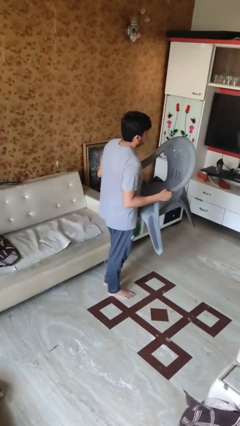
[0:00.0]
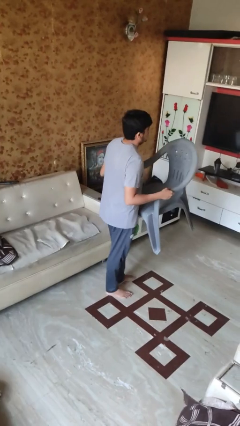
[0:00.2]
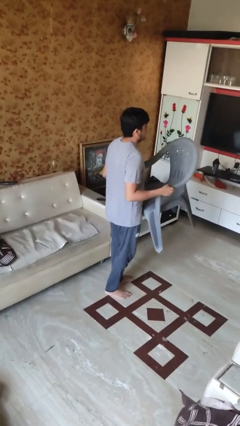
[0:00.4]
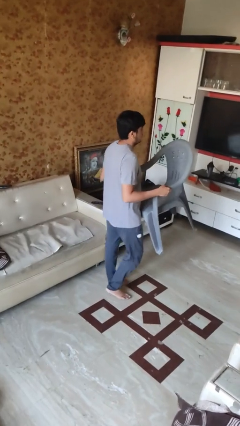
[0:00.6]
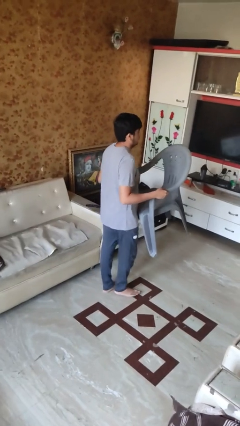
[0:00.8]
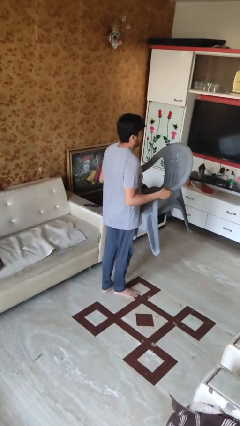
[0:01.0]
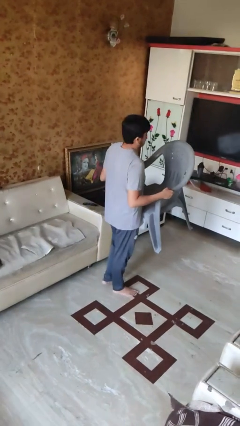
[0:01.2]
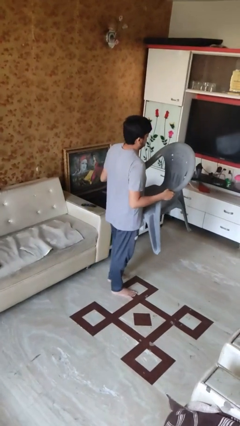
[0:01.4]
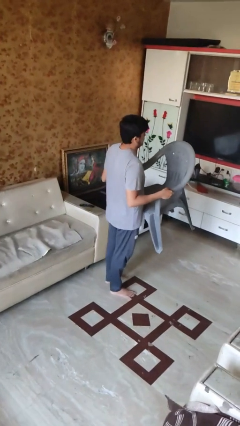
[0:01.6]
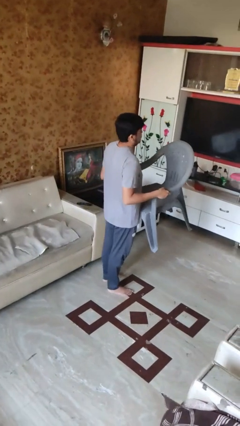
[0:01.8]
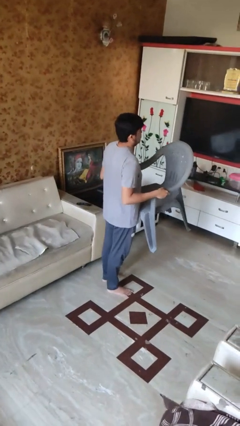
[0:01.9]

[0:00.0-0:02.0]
person carries furniture

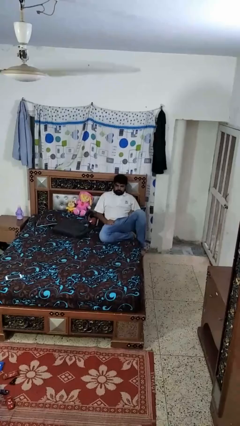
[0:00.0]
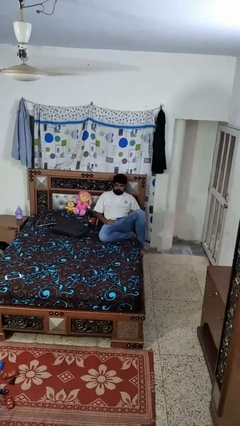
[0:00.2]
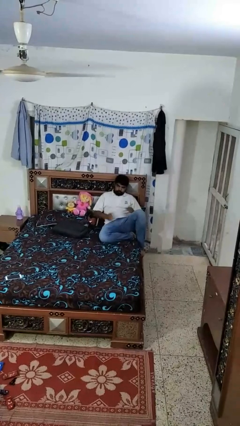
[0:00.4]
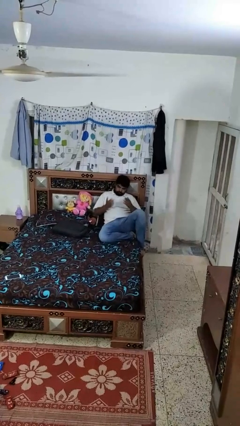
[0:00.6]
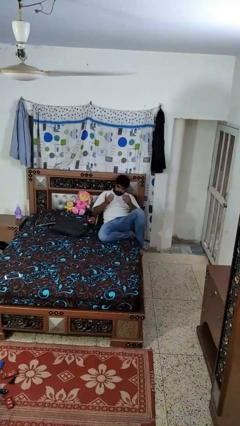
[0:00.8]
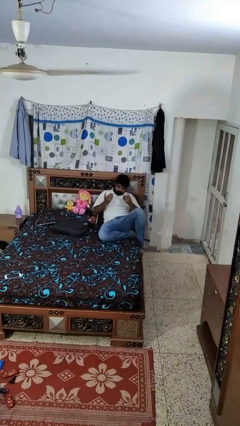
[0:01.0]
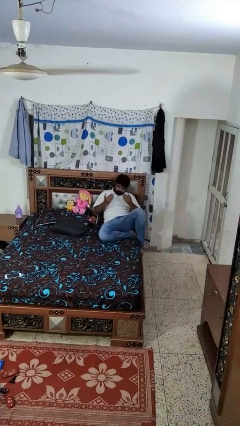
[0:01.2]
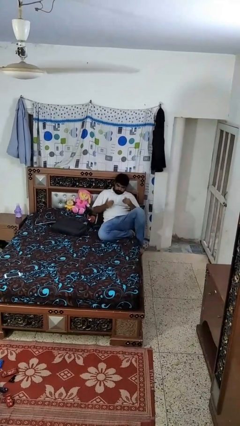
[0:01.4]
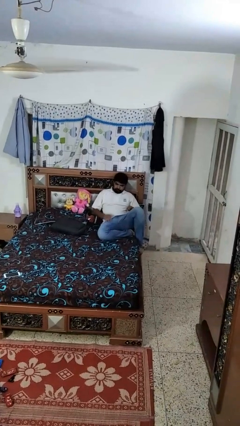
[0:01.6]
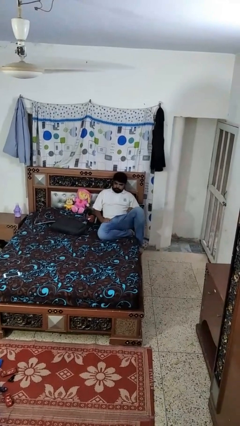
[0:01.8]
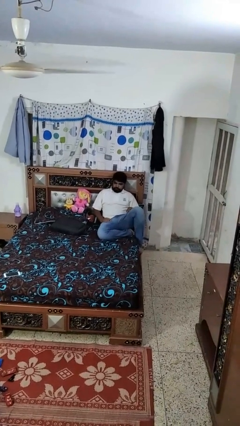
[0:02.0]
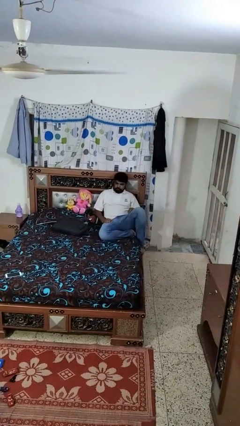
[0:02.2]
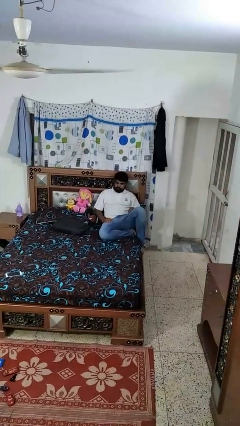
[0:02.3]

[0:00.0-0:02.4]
person gestures come here

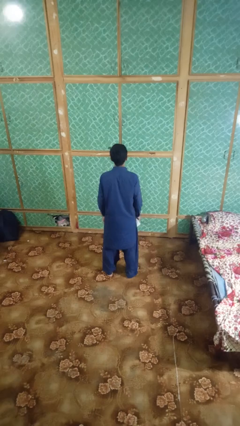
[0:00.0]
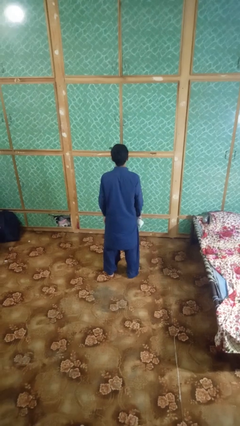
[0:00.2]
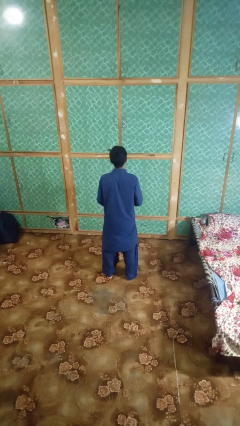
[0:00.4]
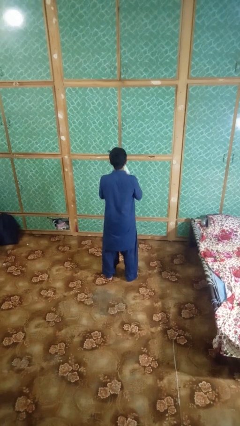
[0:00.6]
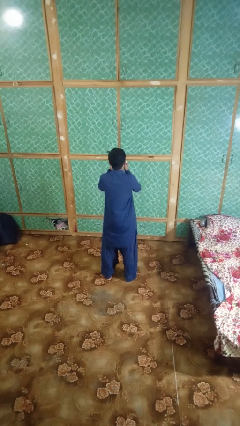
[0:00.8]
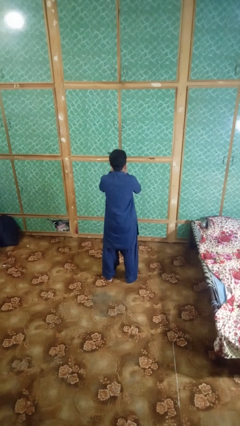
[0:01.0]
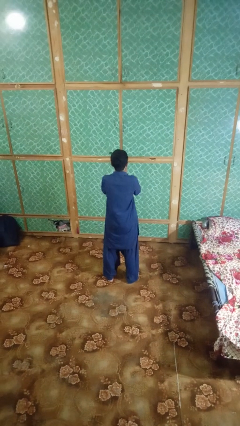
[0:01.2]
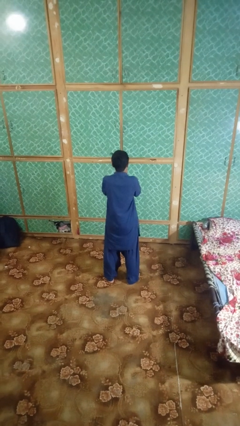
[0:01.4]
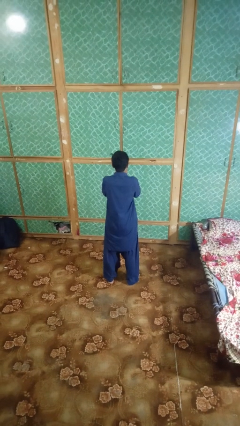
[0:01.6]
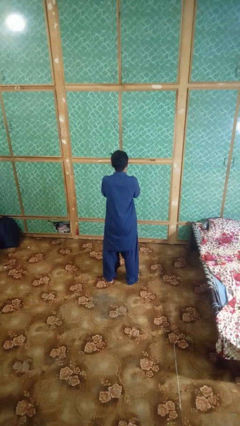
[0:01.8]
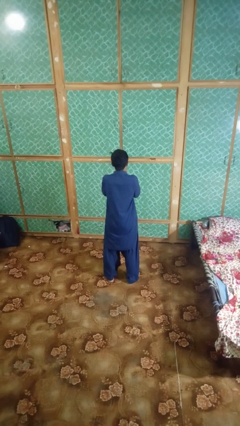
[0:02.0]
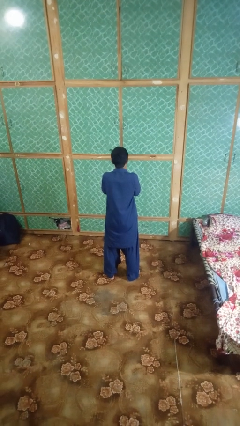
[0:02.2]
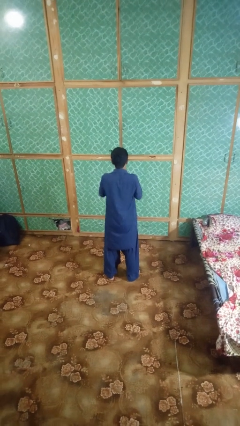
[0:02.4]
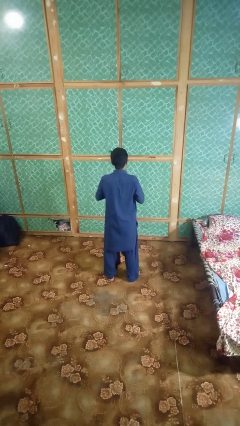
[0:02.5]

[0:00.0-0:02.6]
person blows nose

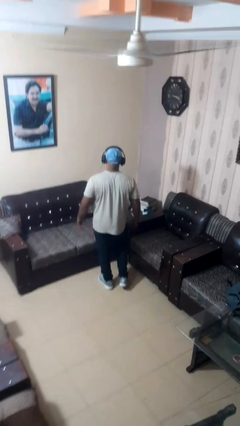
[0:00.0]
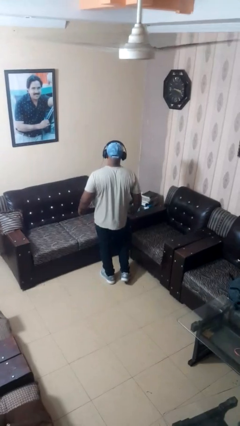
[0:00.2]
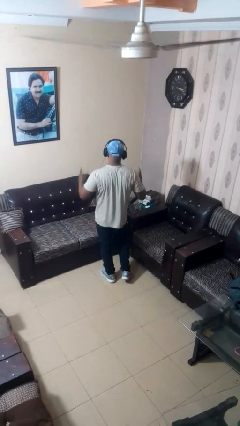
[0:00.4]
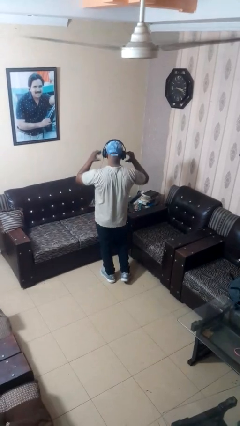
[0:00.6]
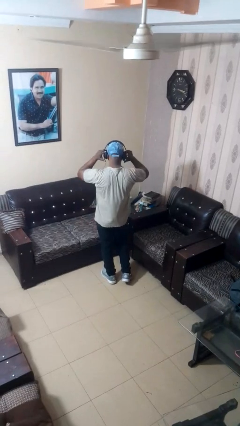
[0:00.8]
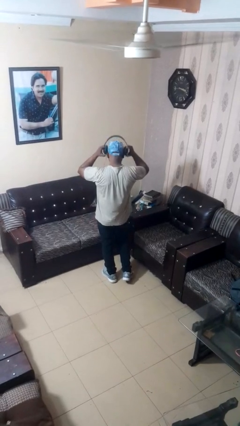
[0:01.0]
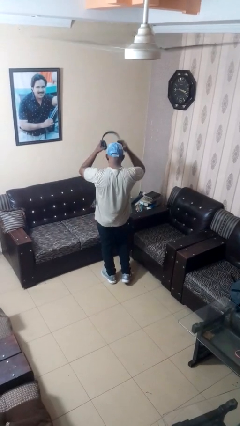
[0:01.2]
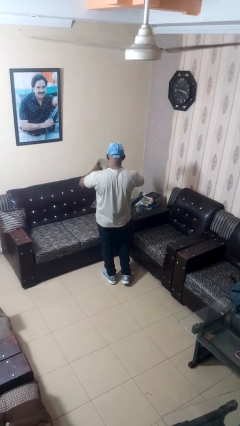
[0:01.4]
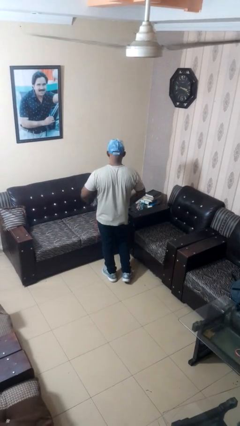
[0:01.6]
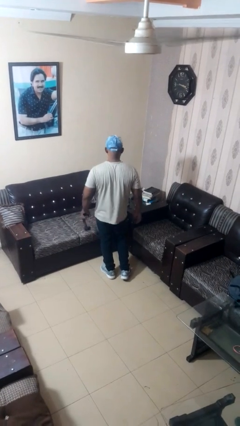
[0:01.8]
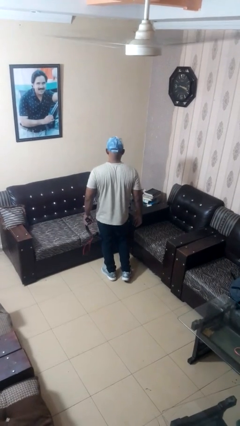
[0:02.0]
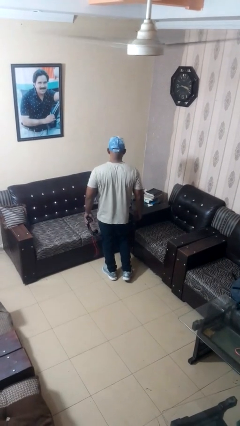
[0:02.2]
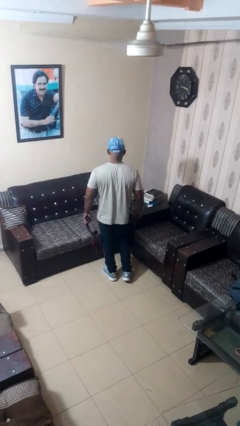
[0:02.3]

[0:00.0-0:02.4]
person takes off headphones

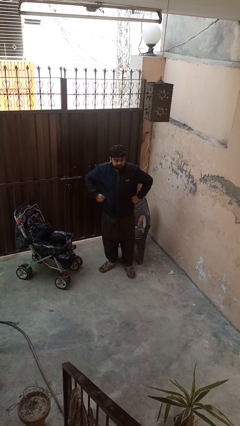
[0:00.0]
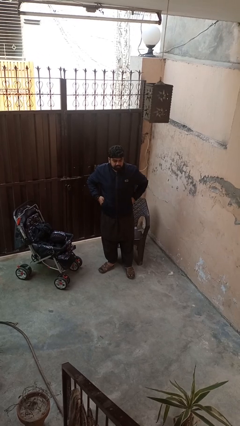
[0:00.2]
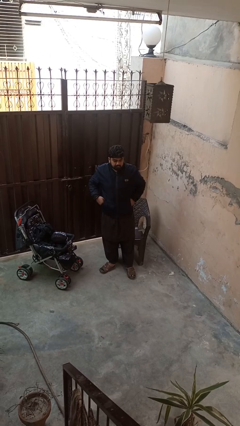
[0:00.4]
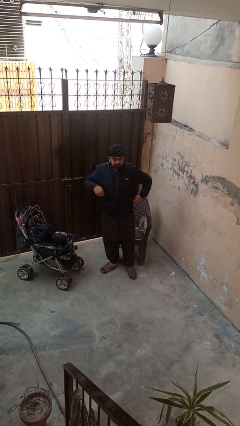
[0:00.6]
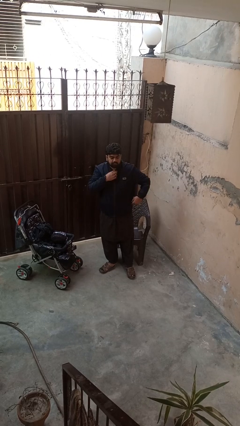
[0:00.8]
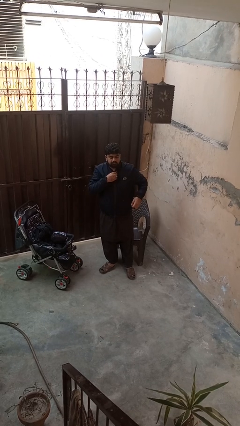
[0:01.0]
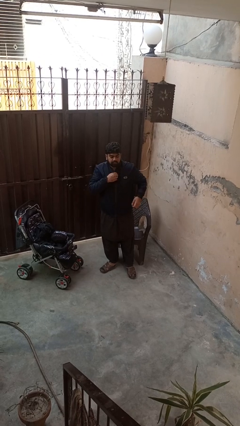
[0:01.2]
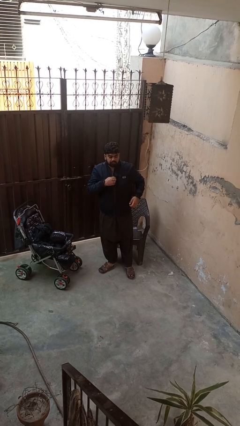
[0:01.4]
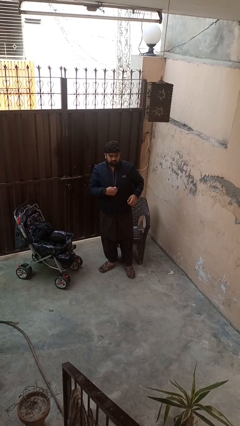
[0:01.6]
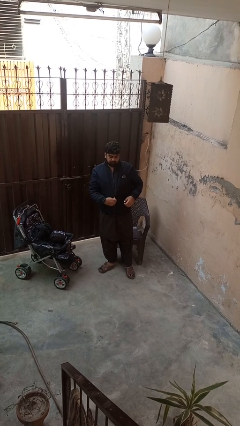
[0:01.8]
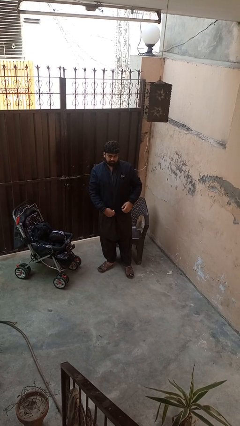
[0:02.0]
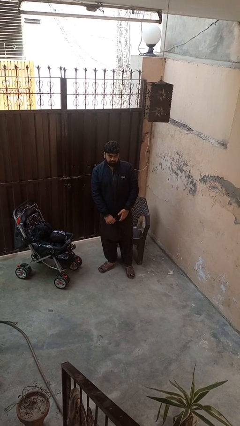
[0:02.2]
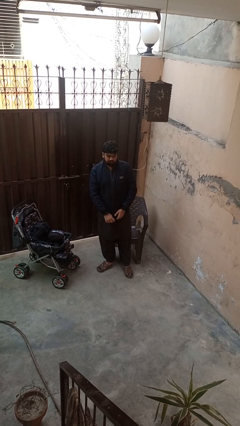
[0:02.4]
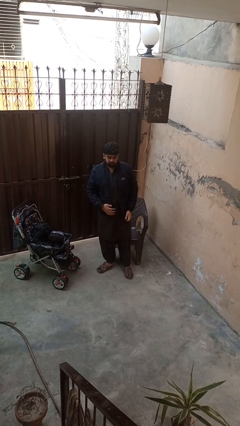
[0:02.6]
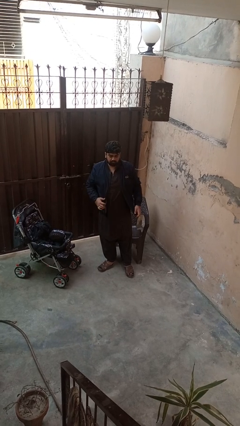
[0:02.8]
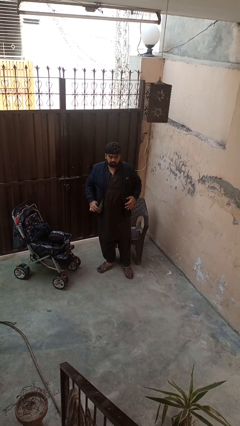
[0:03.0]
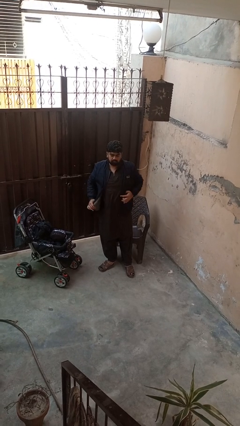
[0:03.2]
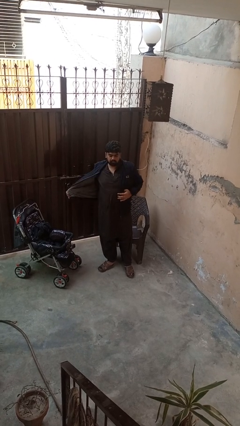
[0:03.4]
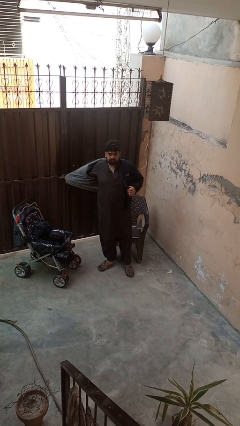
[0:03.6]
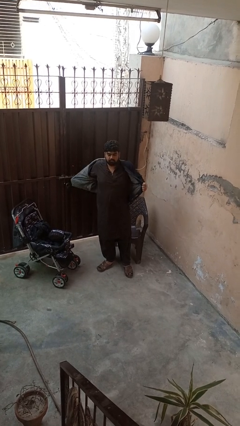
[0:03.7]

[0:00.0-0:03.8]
person unzips jacket

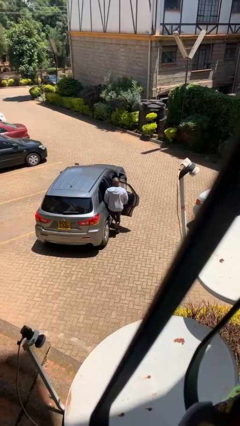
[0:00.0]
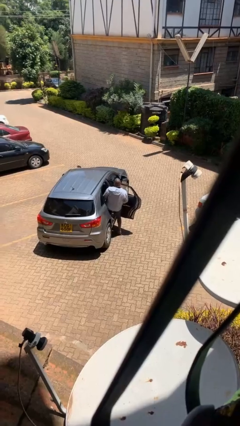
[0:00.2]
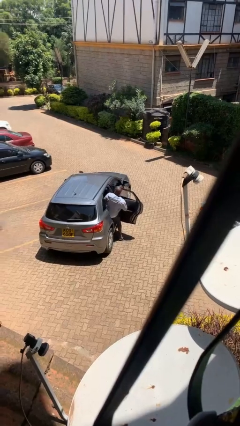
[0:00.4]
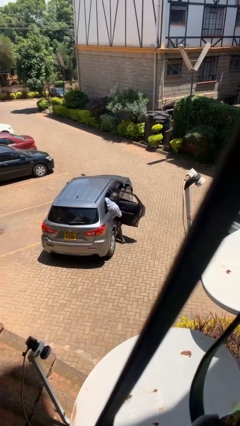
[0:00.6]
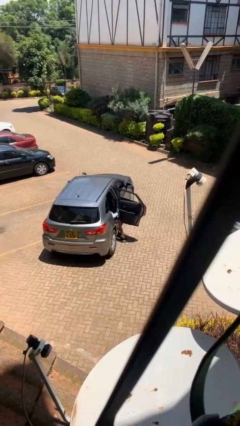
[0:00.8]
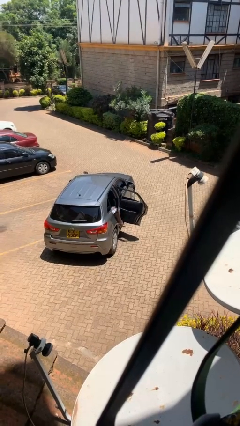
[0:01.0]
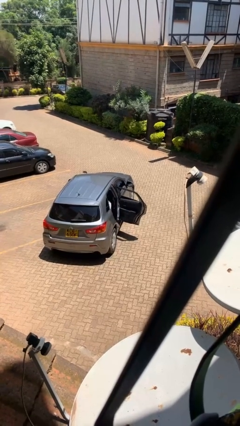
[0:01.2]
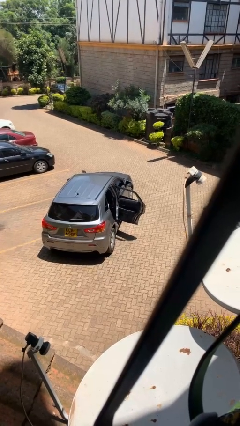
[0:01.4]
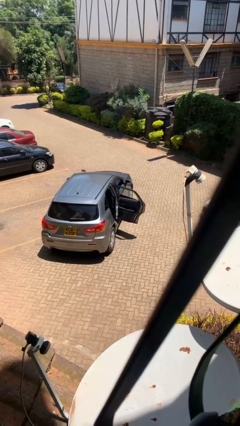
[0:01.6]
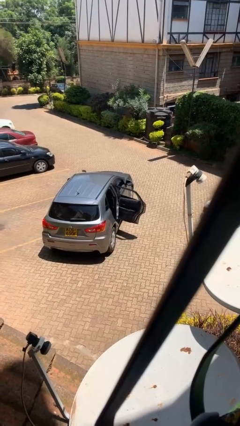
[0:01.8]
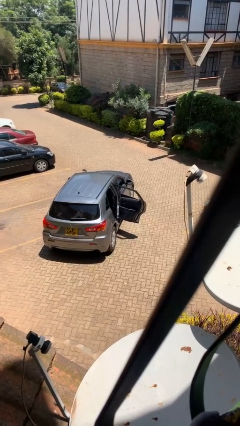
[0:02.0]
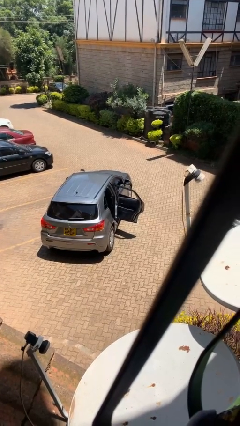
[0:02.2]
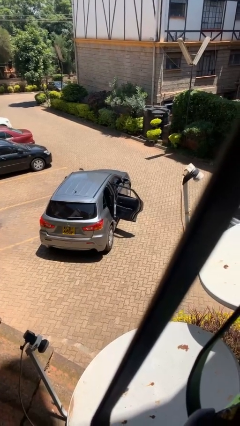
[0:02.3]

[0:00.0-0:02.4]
person enters car

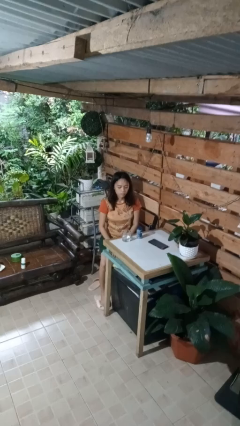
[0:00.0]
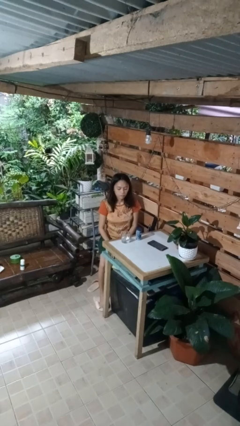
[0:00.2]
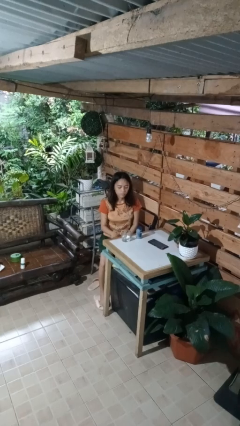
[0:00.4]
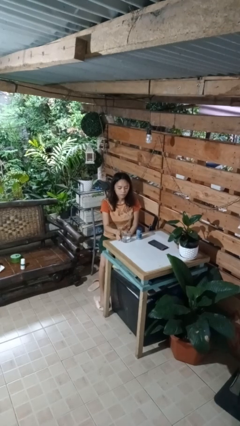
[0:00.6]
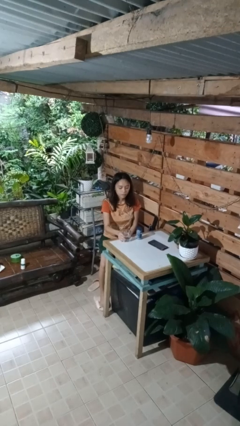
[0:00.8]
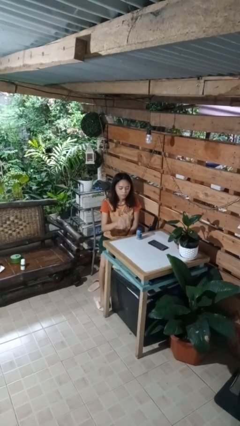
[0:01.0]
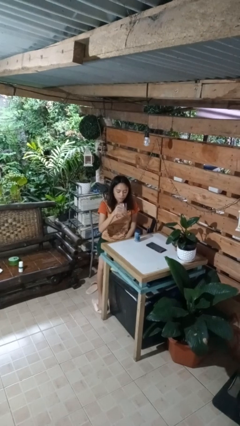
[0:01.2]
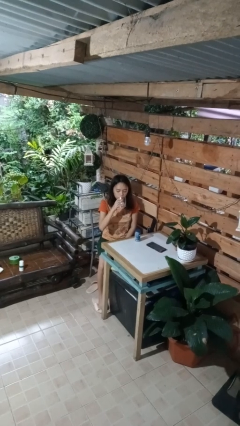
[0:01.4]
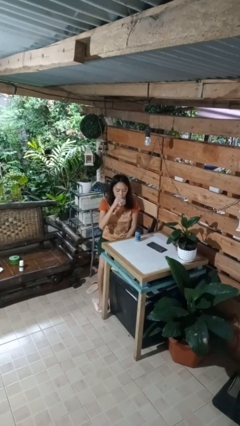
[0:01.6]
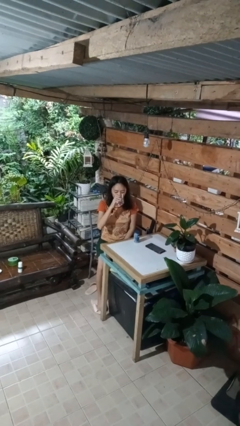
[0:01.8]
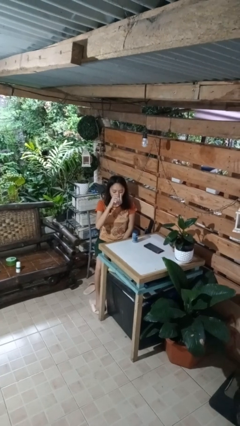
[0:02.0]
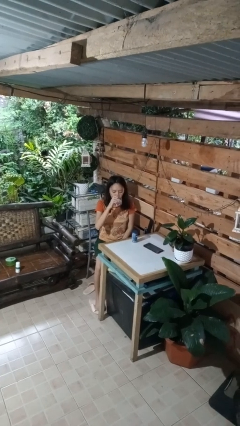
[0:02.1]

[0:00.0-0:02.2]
person drinks from cup
